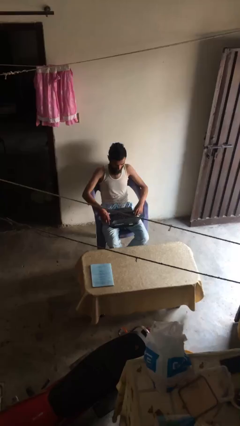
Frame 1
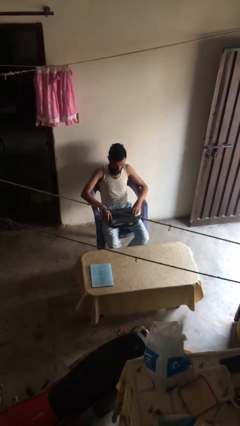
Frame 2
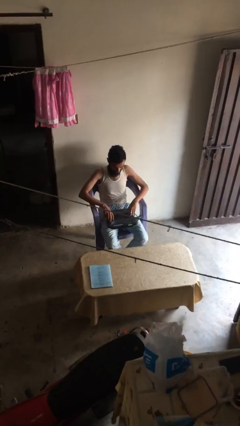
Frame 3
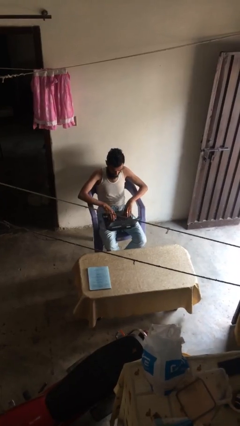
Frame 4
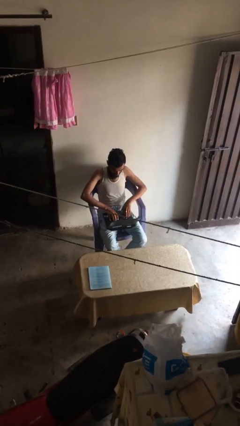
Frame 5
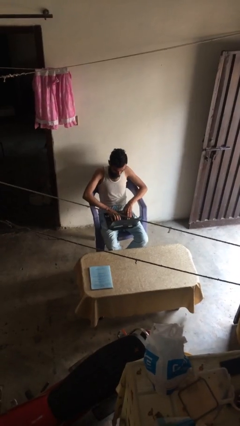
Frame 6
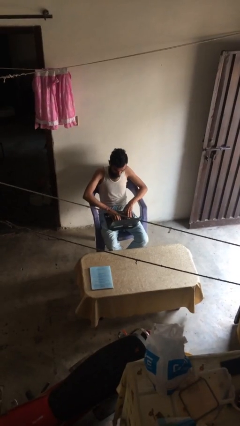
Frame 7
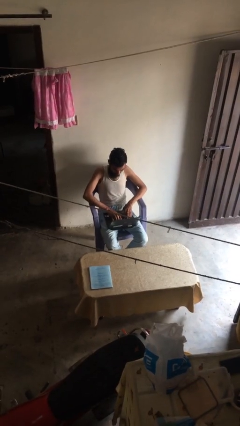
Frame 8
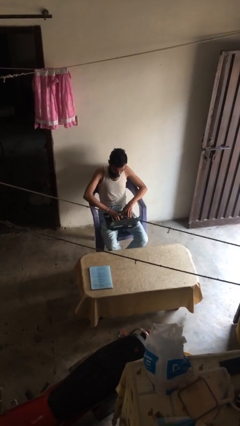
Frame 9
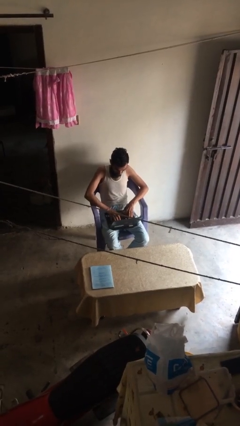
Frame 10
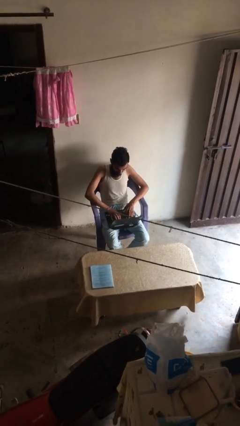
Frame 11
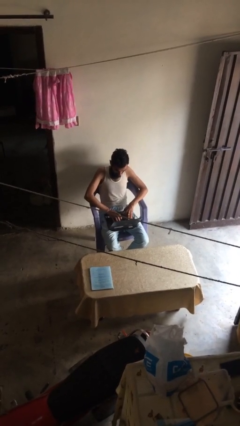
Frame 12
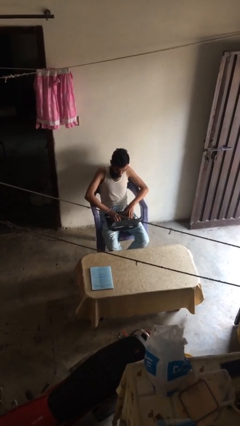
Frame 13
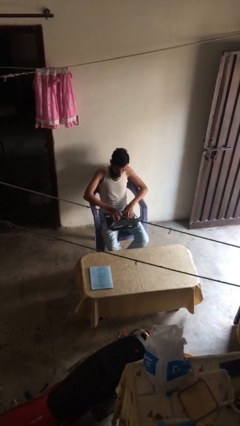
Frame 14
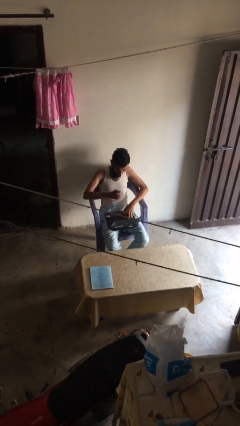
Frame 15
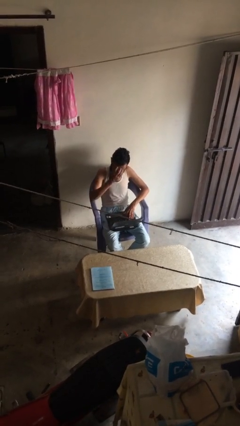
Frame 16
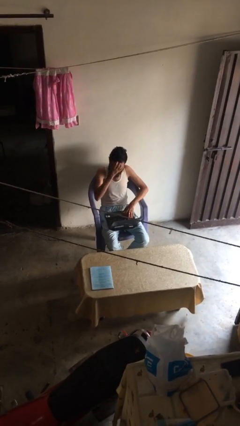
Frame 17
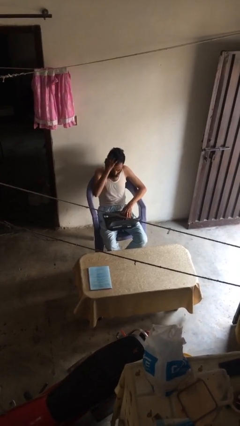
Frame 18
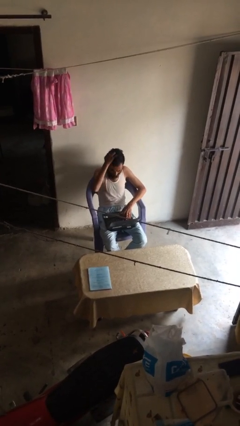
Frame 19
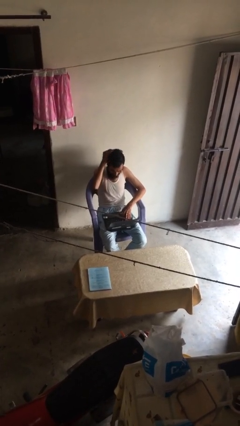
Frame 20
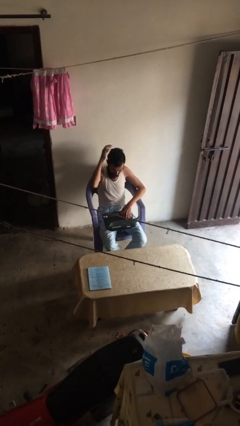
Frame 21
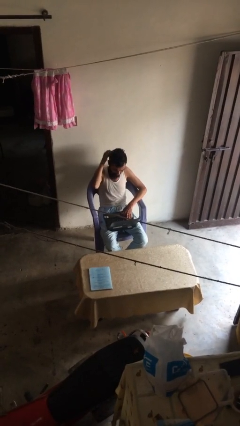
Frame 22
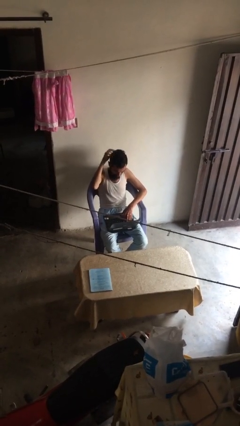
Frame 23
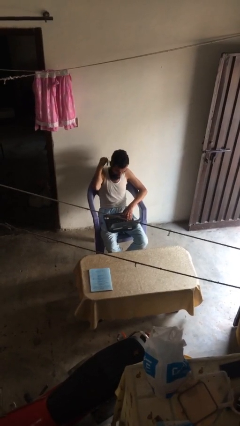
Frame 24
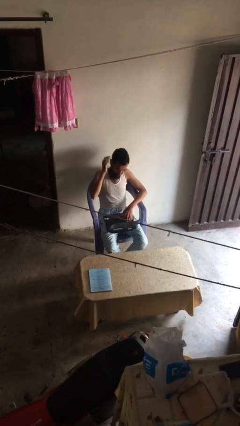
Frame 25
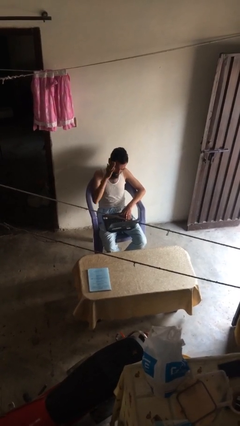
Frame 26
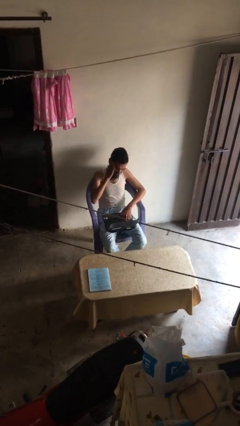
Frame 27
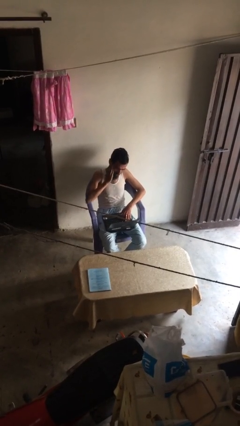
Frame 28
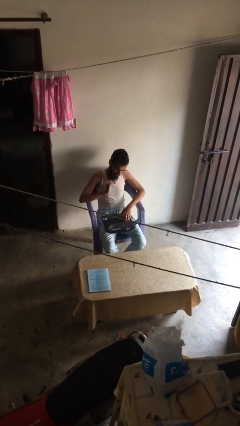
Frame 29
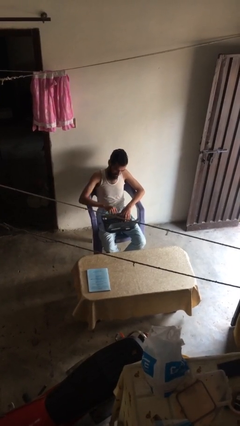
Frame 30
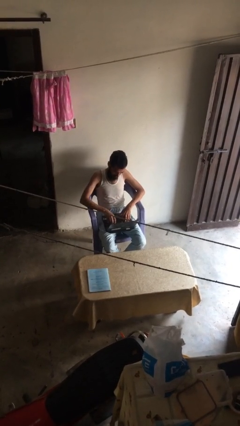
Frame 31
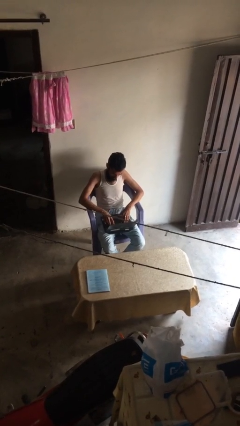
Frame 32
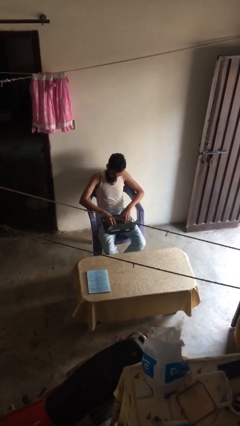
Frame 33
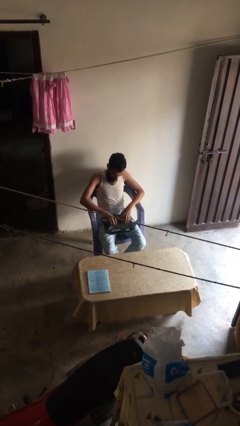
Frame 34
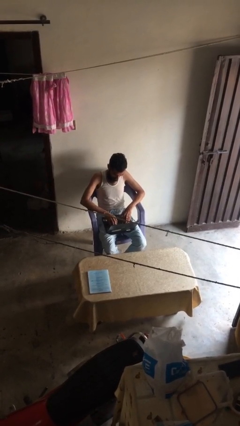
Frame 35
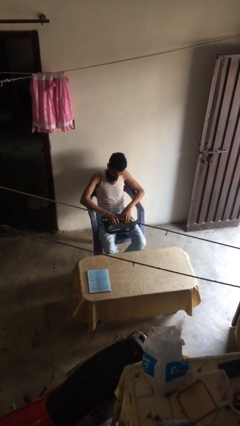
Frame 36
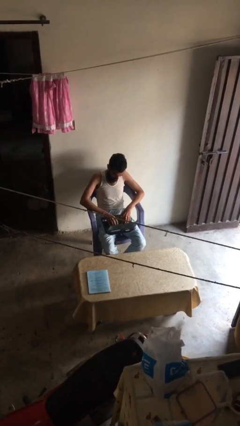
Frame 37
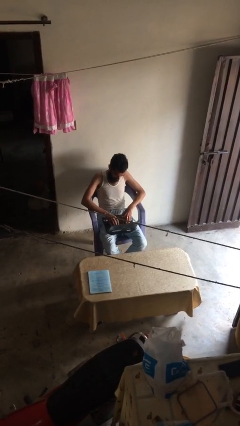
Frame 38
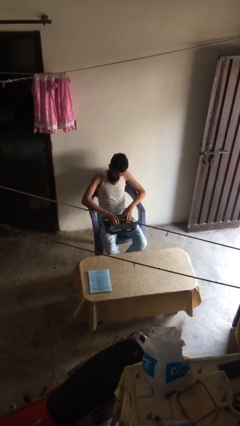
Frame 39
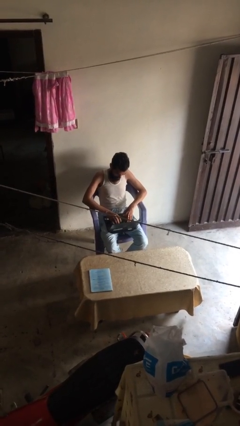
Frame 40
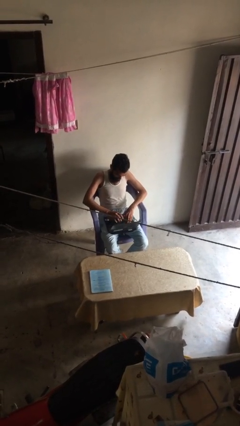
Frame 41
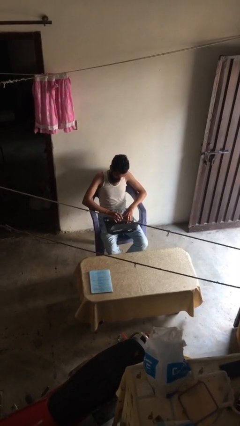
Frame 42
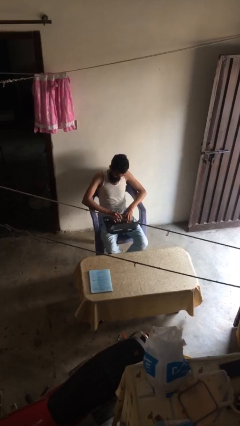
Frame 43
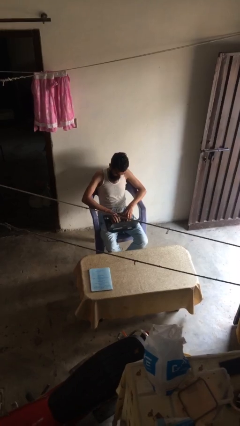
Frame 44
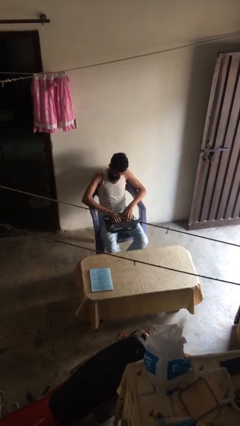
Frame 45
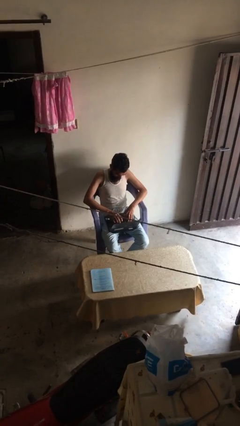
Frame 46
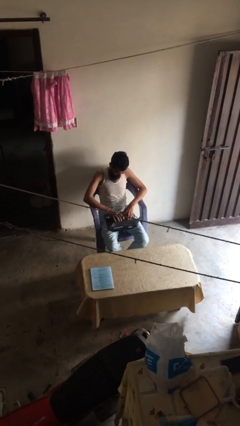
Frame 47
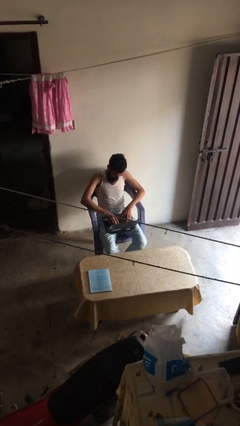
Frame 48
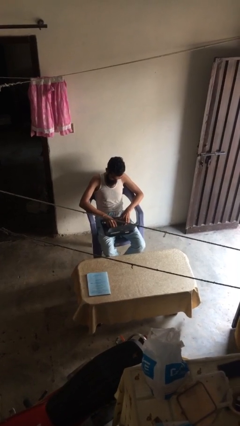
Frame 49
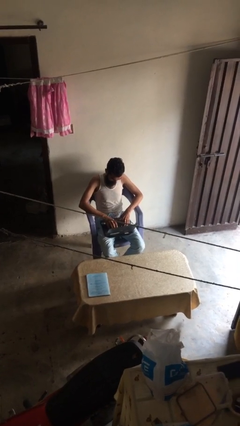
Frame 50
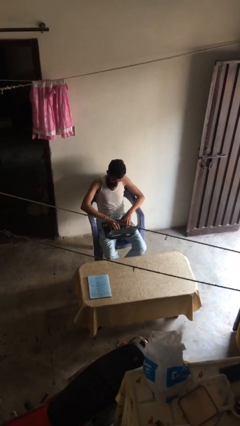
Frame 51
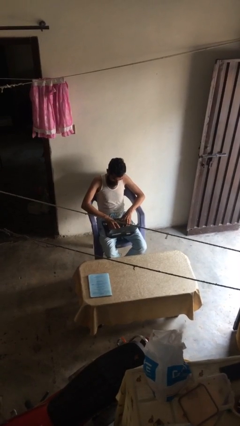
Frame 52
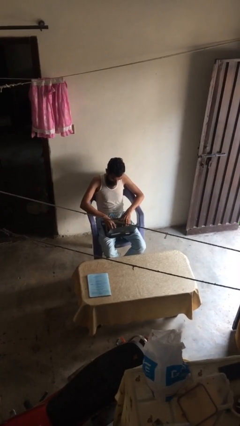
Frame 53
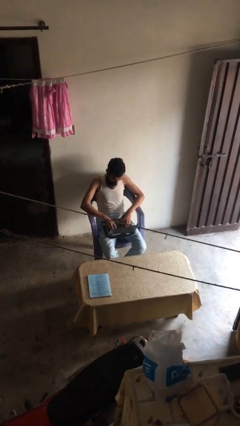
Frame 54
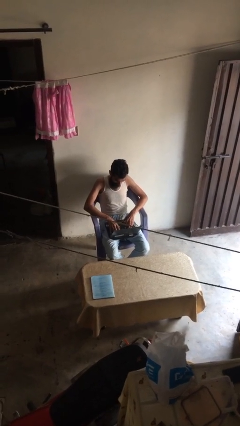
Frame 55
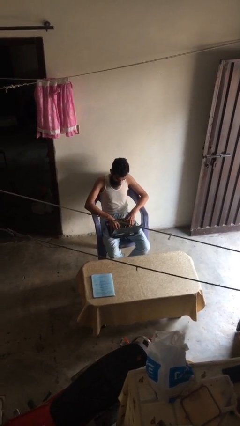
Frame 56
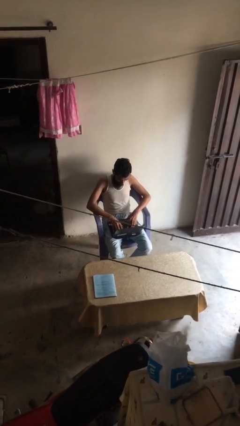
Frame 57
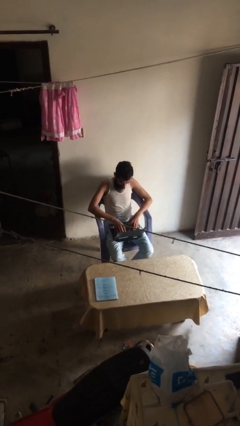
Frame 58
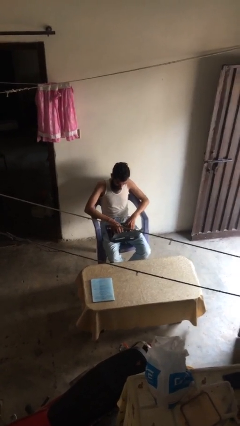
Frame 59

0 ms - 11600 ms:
person interacts with laptop

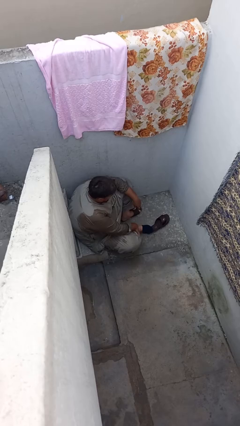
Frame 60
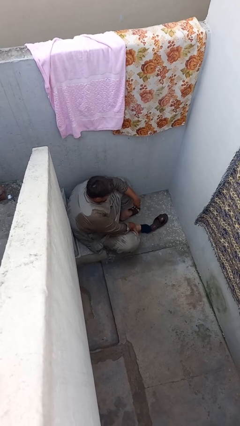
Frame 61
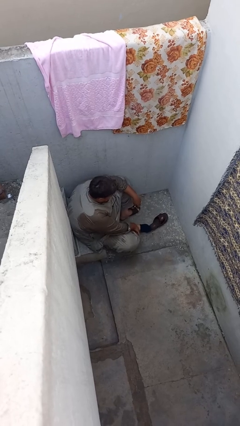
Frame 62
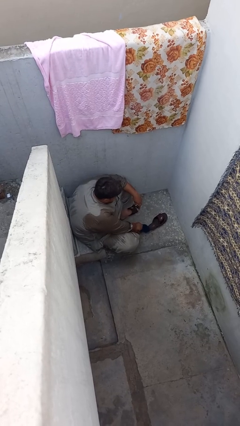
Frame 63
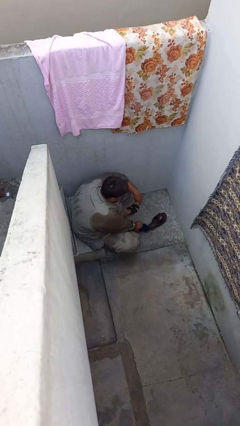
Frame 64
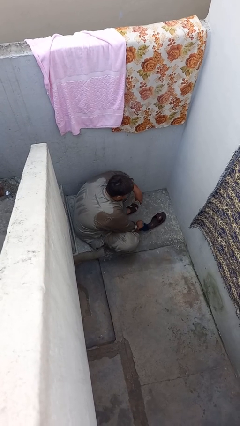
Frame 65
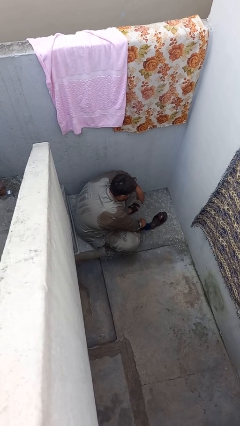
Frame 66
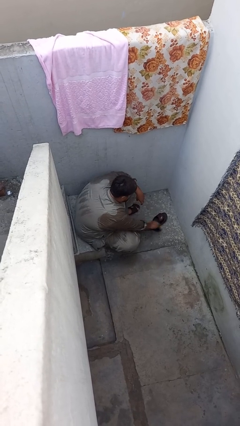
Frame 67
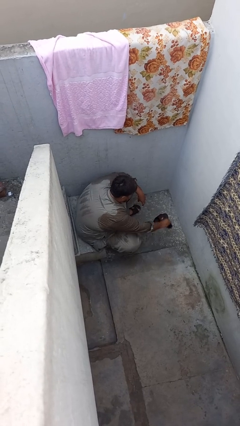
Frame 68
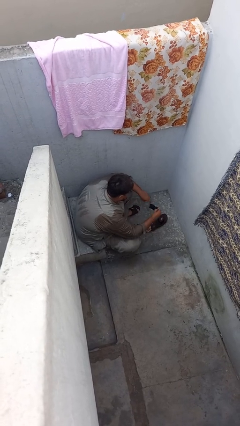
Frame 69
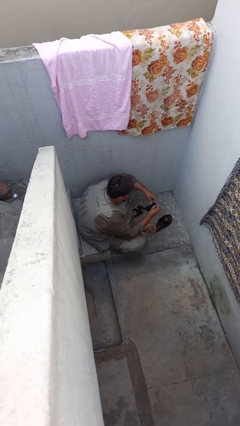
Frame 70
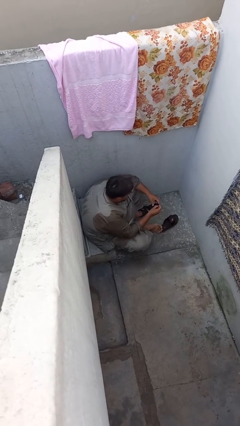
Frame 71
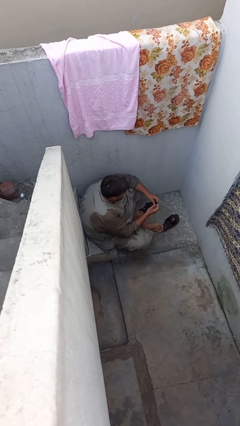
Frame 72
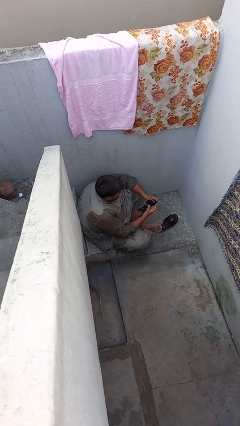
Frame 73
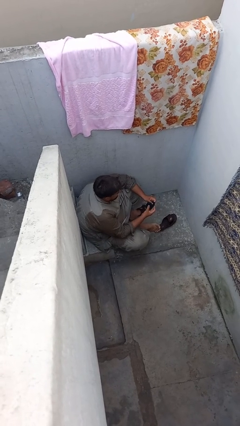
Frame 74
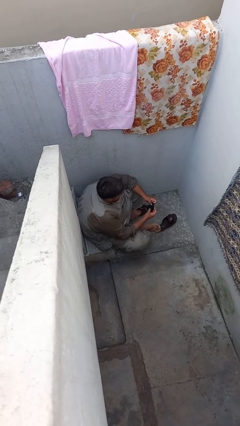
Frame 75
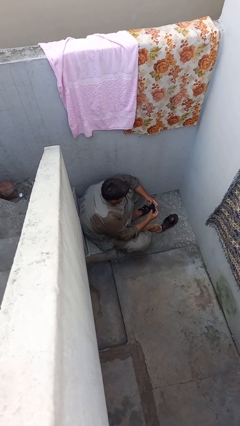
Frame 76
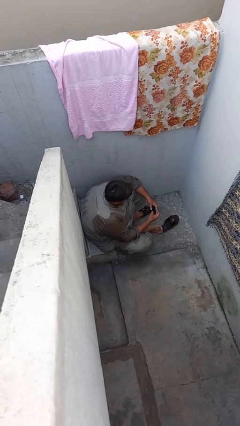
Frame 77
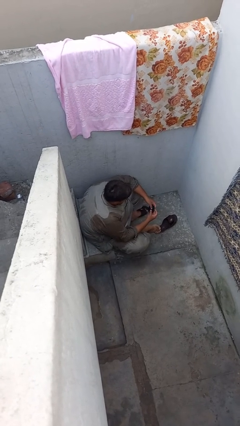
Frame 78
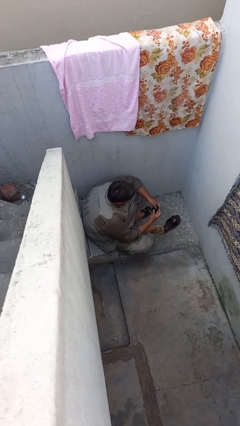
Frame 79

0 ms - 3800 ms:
person takes off socks

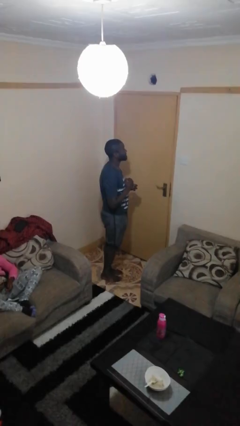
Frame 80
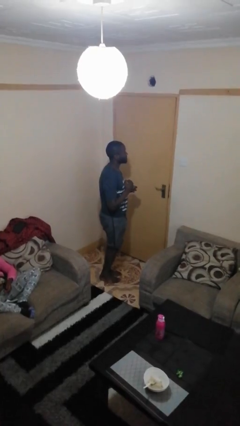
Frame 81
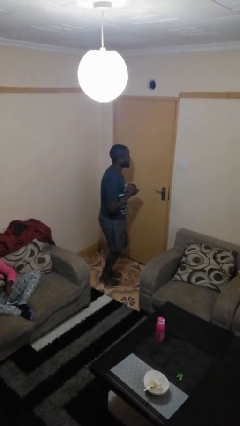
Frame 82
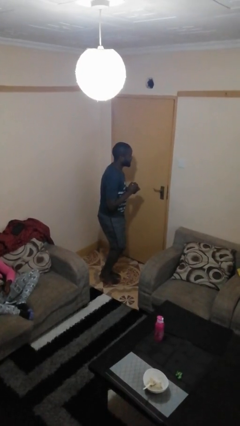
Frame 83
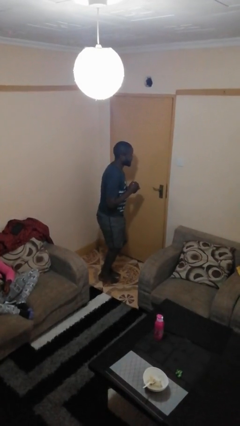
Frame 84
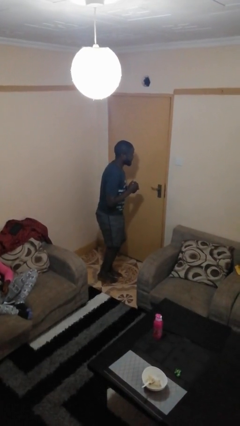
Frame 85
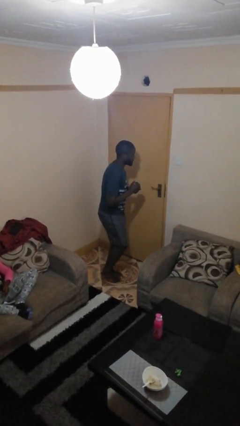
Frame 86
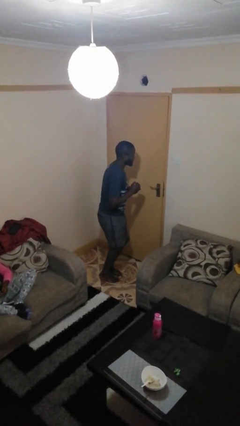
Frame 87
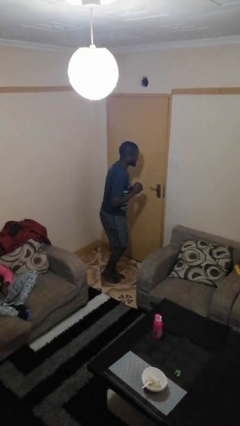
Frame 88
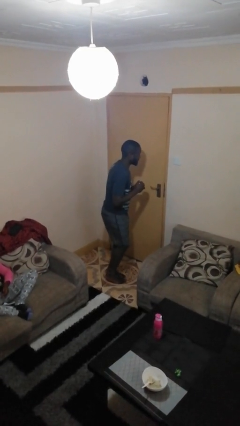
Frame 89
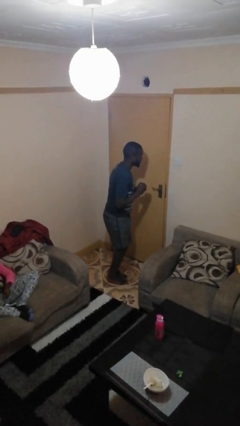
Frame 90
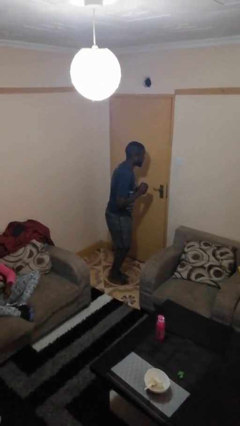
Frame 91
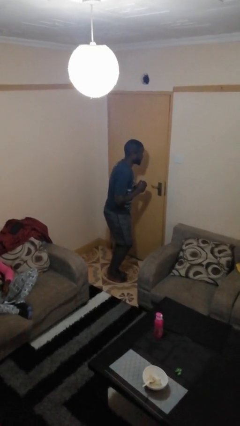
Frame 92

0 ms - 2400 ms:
person walks tiptoe
